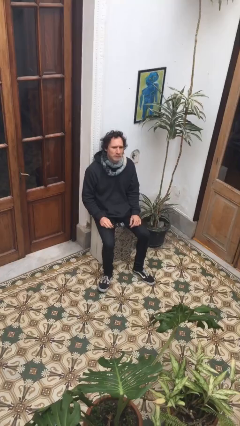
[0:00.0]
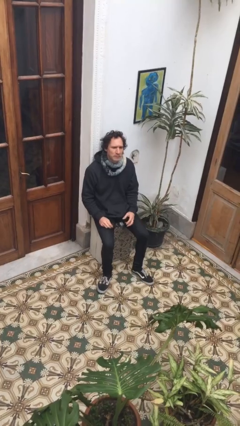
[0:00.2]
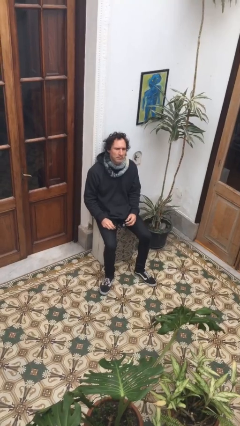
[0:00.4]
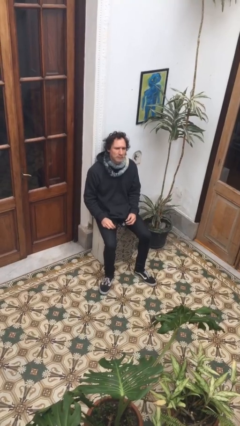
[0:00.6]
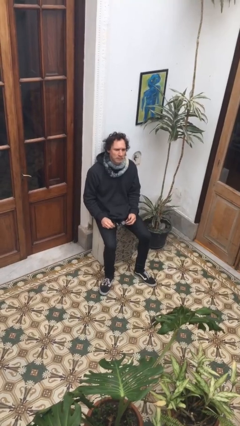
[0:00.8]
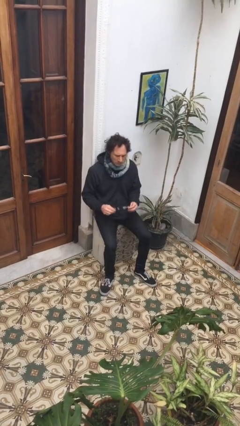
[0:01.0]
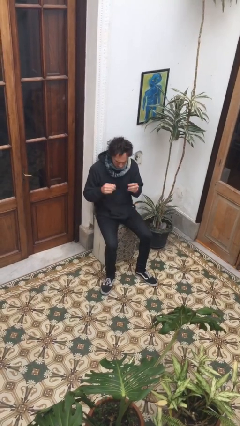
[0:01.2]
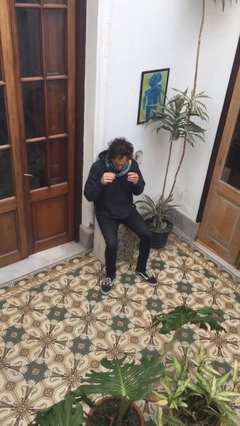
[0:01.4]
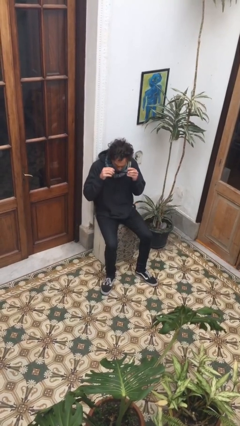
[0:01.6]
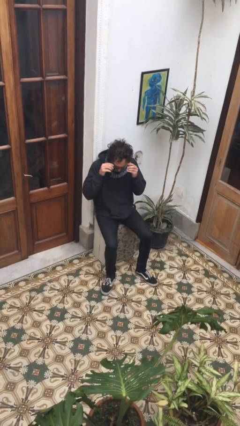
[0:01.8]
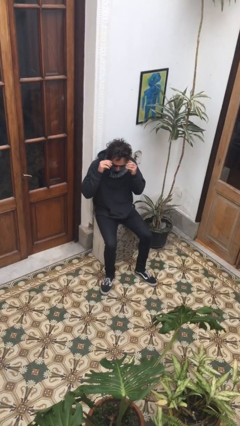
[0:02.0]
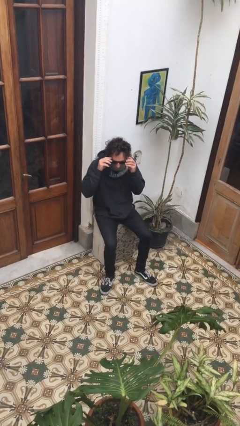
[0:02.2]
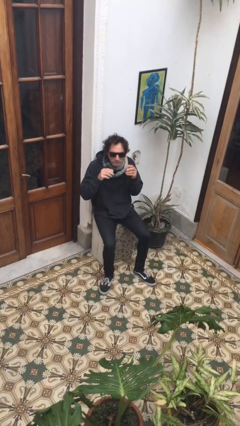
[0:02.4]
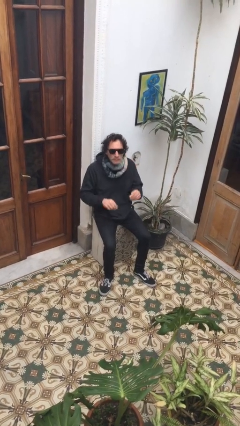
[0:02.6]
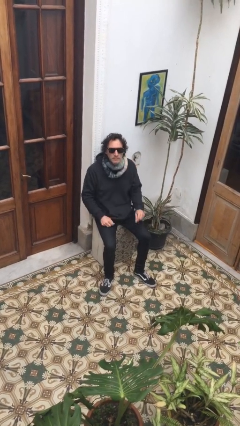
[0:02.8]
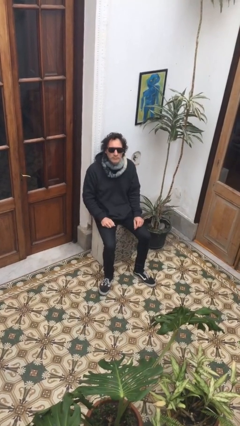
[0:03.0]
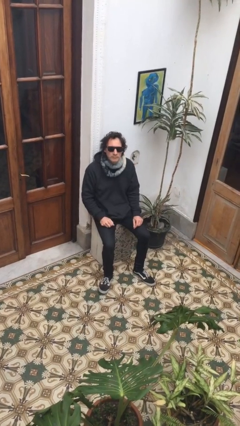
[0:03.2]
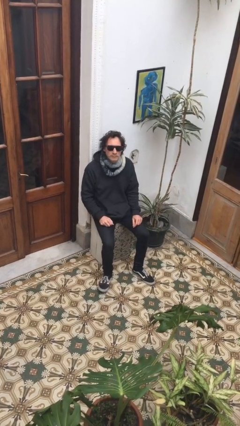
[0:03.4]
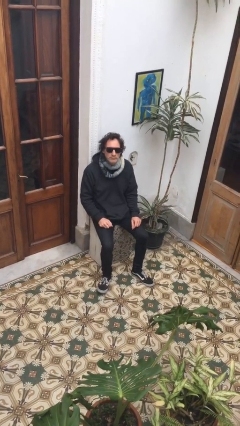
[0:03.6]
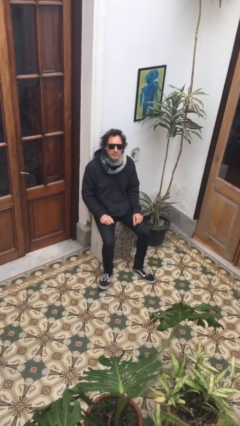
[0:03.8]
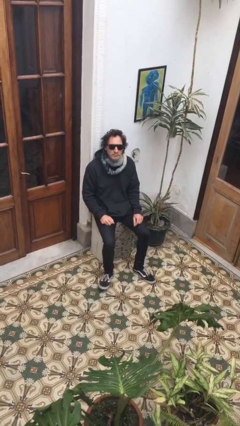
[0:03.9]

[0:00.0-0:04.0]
person puts on sunglasses

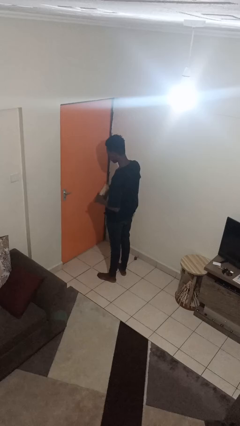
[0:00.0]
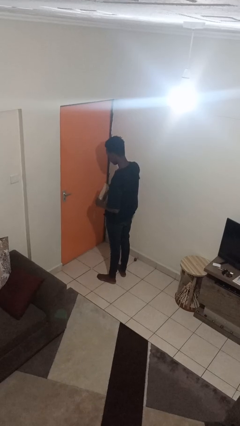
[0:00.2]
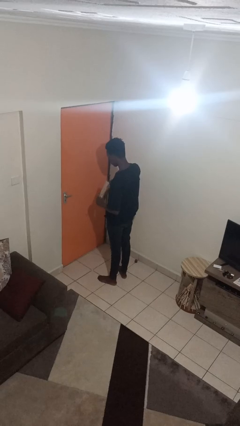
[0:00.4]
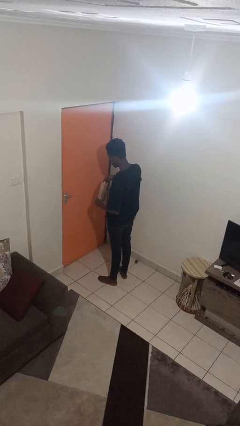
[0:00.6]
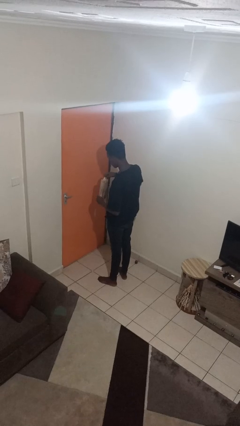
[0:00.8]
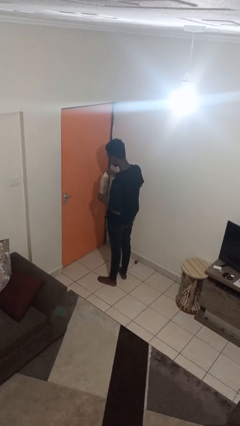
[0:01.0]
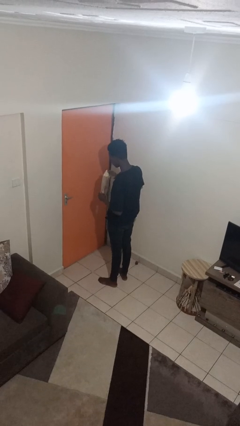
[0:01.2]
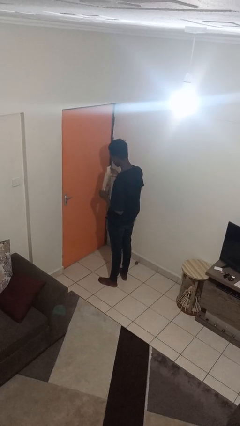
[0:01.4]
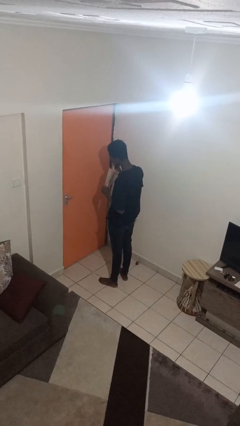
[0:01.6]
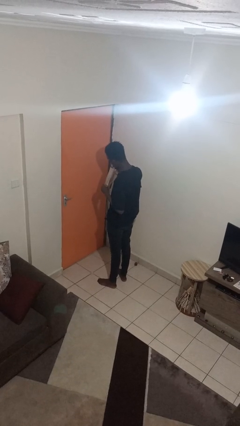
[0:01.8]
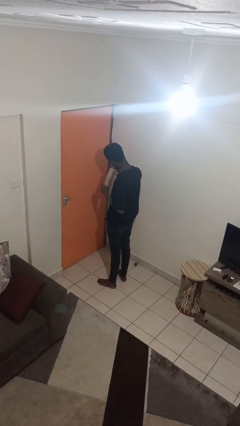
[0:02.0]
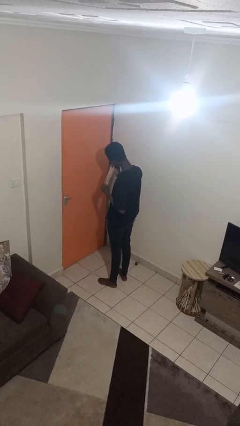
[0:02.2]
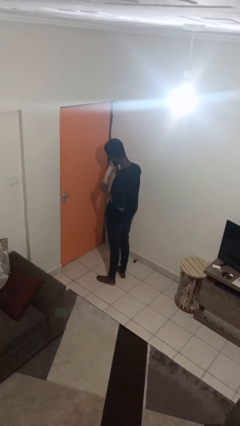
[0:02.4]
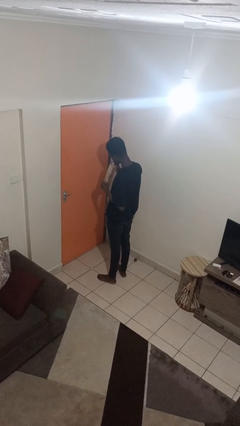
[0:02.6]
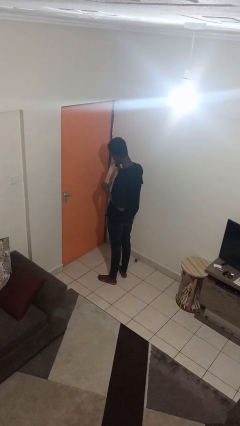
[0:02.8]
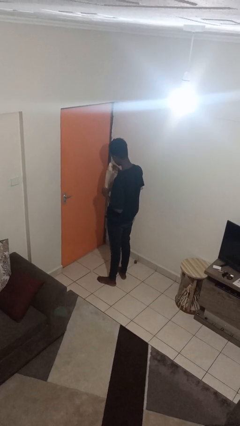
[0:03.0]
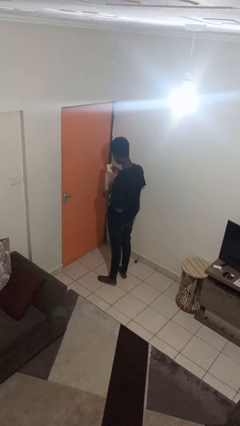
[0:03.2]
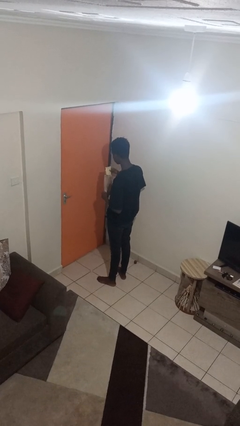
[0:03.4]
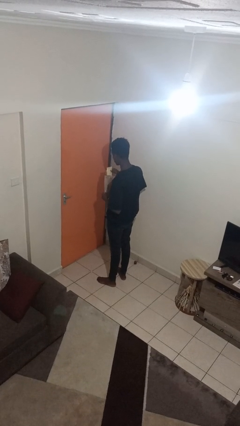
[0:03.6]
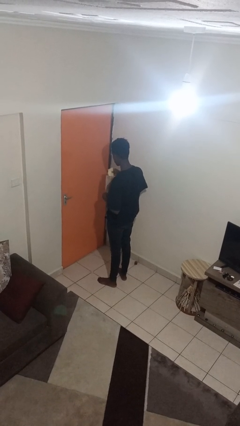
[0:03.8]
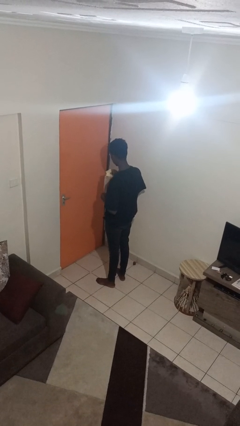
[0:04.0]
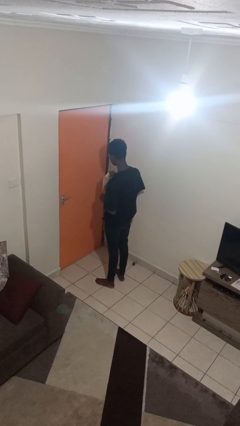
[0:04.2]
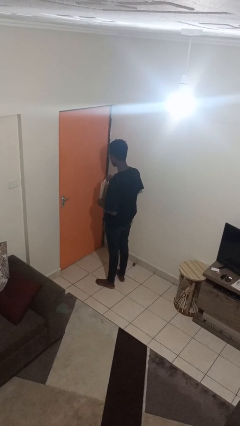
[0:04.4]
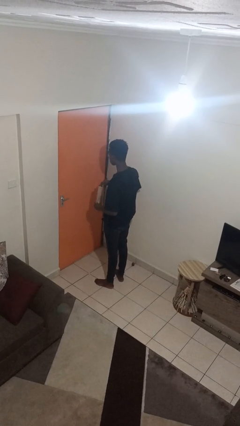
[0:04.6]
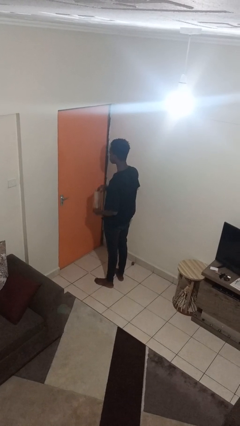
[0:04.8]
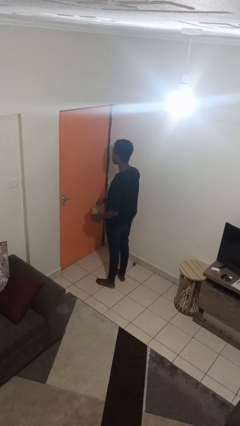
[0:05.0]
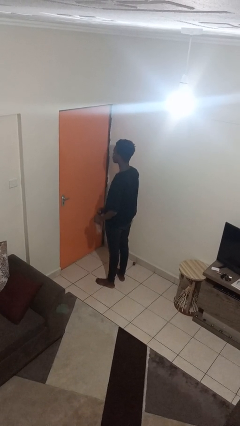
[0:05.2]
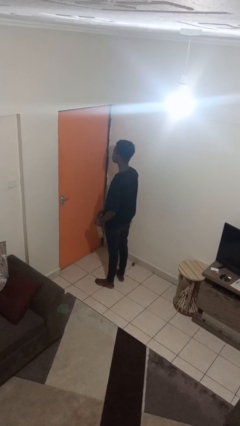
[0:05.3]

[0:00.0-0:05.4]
person eats snack from bag

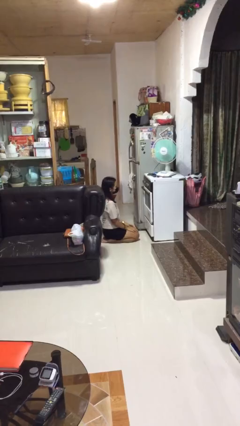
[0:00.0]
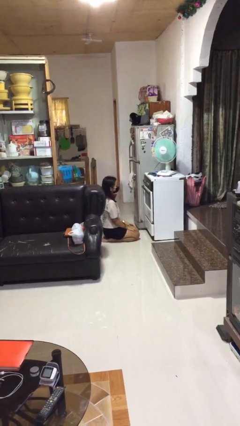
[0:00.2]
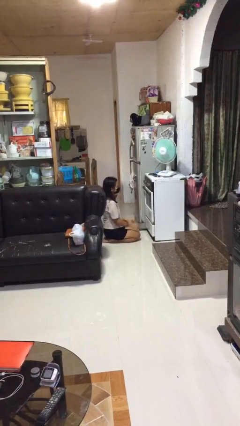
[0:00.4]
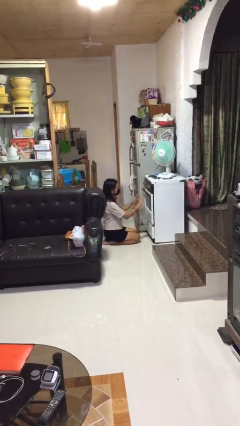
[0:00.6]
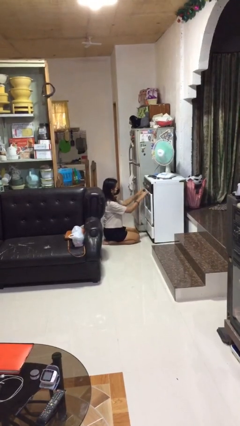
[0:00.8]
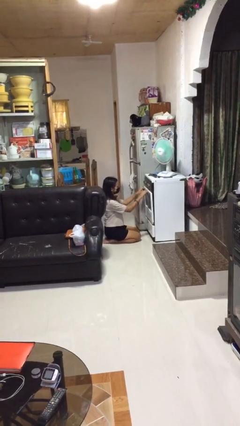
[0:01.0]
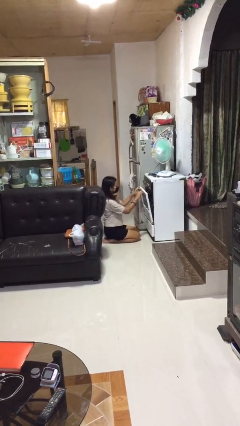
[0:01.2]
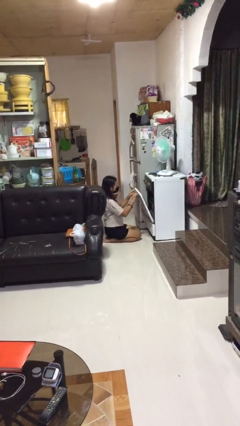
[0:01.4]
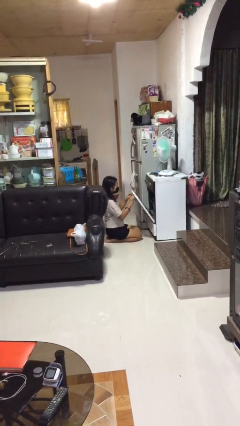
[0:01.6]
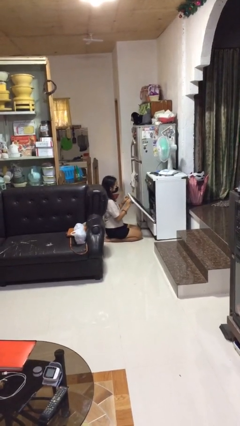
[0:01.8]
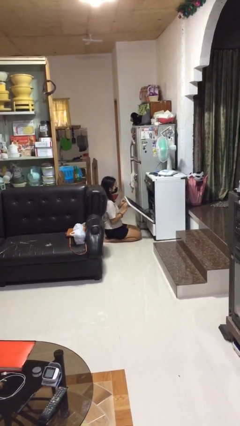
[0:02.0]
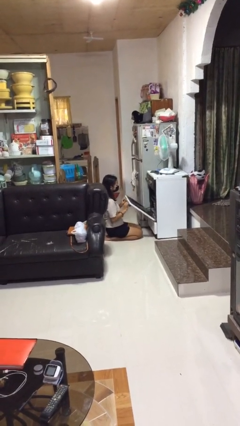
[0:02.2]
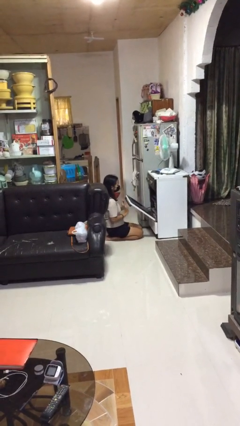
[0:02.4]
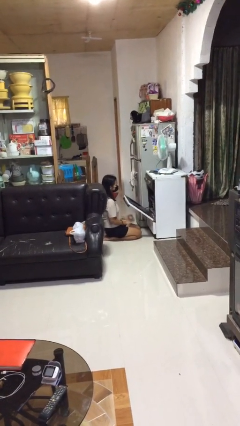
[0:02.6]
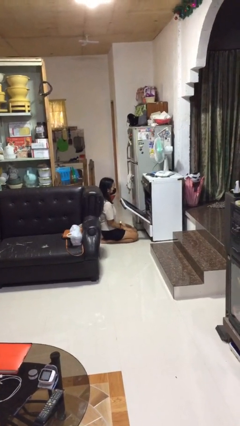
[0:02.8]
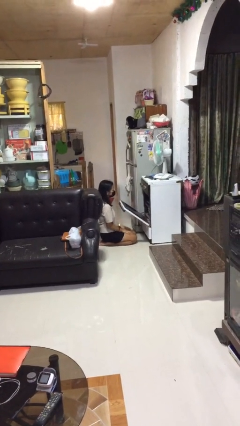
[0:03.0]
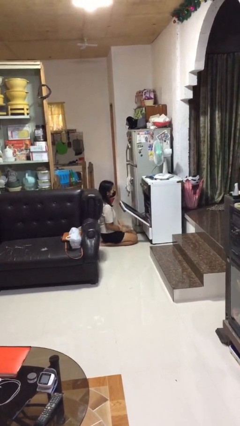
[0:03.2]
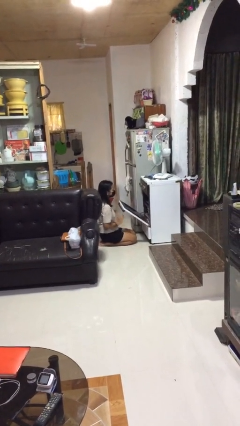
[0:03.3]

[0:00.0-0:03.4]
person opens oven door

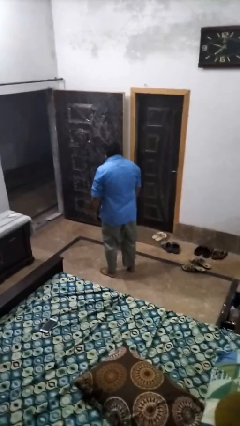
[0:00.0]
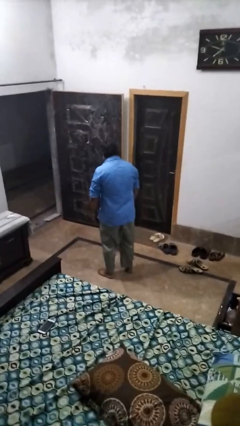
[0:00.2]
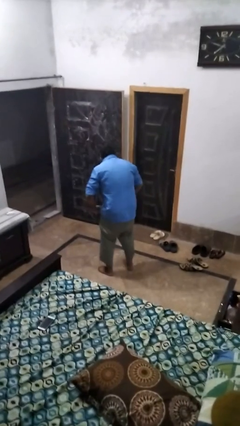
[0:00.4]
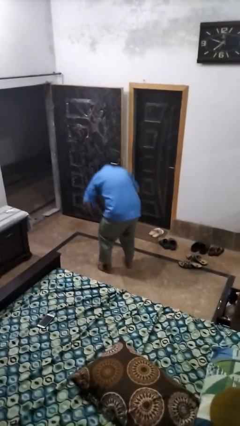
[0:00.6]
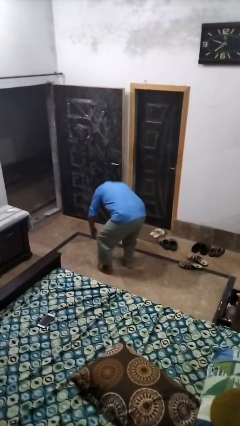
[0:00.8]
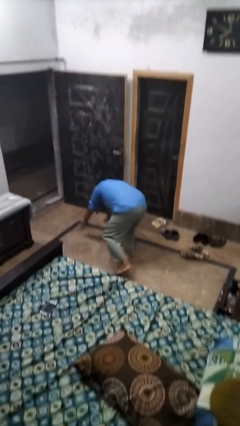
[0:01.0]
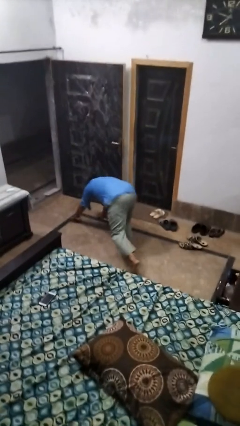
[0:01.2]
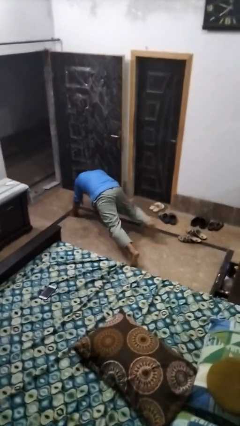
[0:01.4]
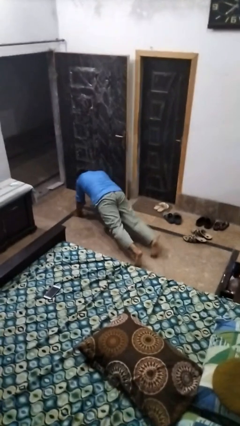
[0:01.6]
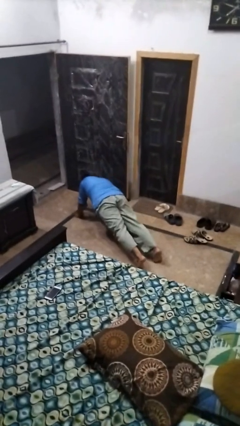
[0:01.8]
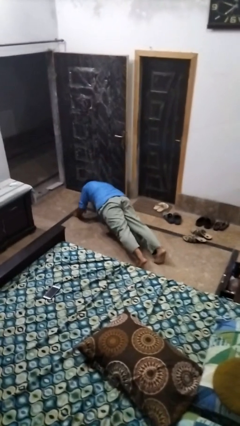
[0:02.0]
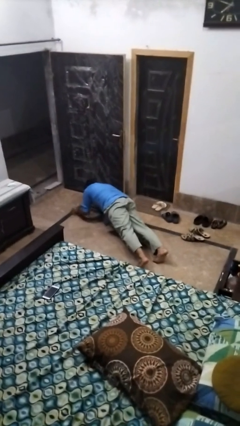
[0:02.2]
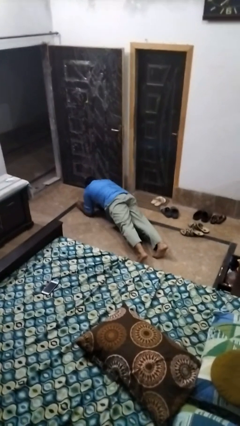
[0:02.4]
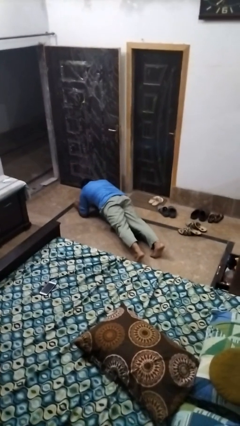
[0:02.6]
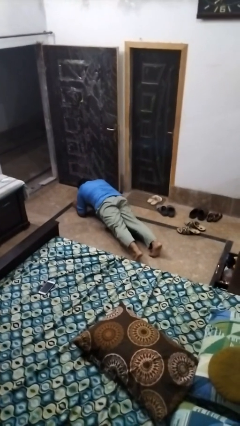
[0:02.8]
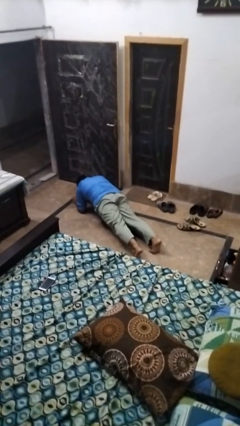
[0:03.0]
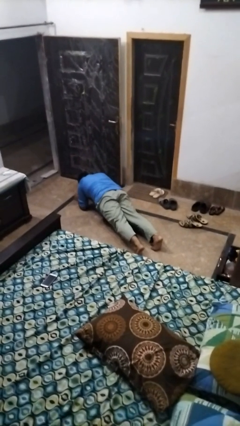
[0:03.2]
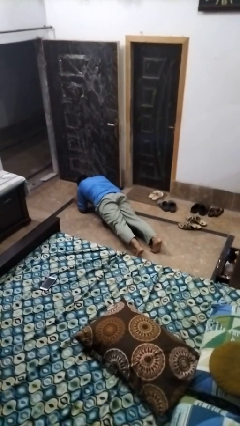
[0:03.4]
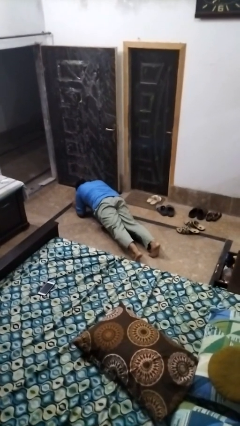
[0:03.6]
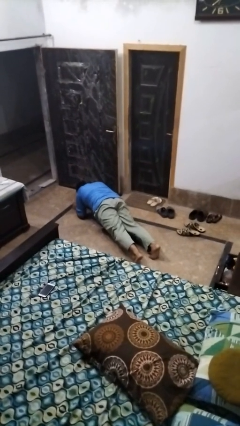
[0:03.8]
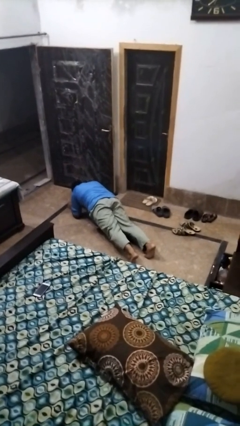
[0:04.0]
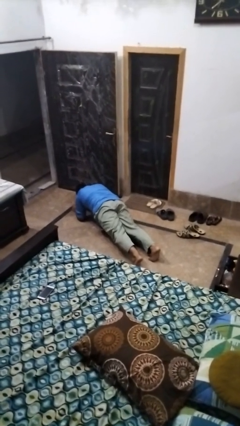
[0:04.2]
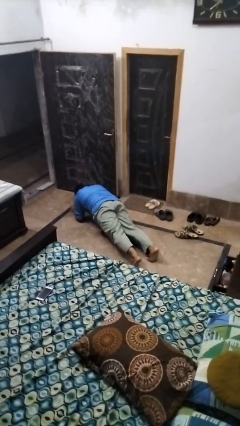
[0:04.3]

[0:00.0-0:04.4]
person exercises with plank

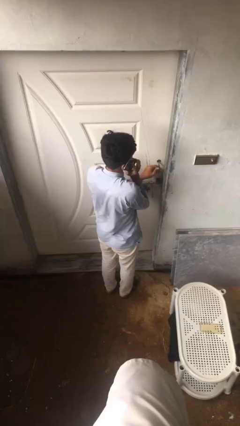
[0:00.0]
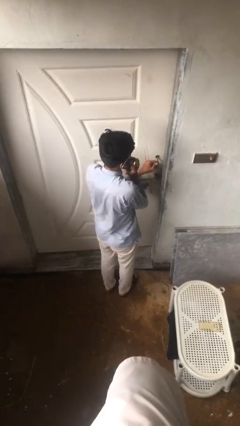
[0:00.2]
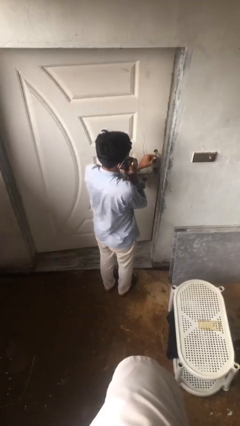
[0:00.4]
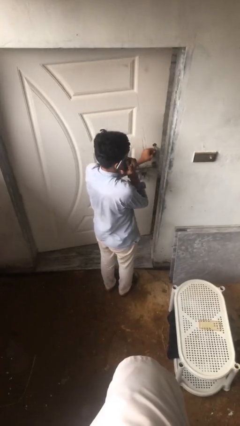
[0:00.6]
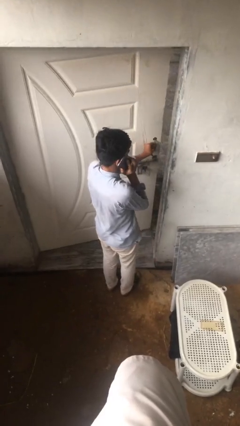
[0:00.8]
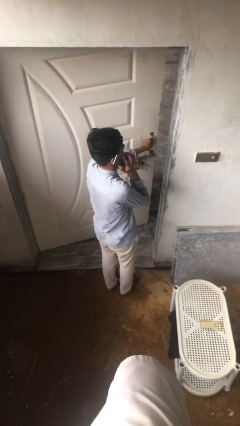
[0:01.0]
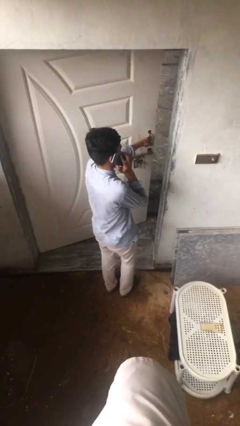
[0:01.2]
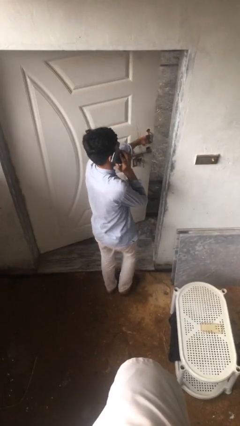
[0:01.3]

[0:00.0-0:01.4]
person opens facility door
